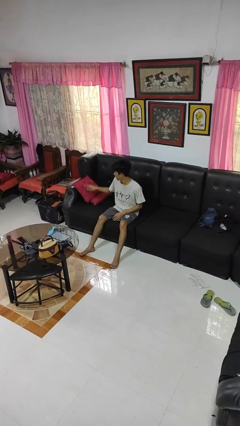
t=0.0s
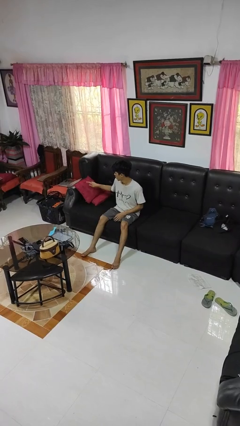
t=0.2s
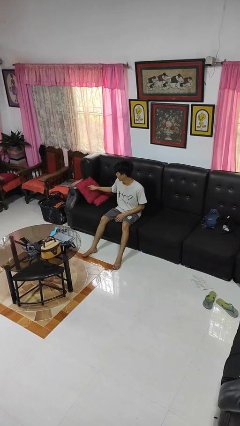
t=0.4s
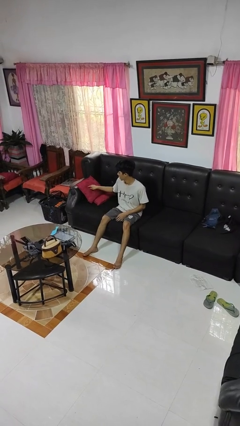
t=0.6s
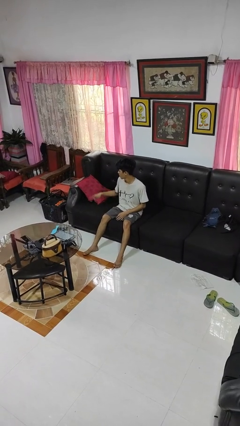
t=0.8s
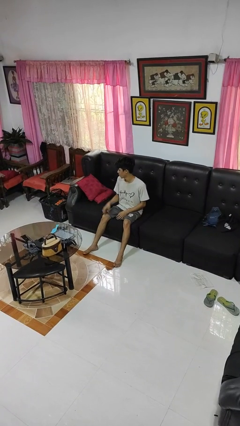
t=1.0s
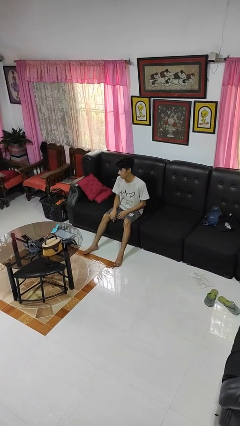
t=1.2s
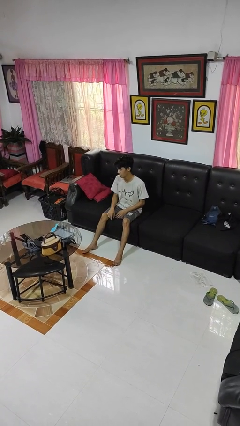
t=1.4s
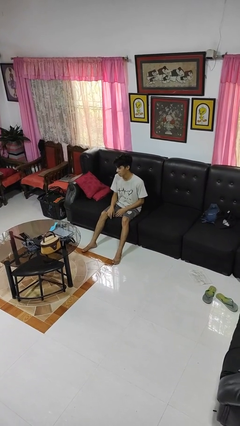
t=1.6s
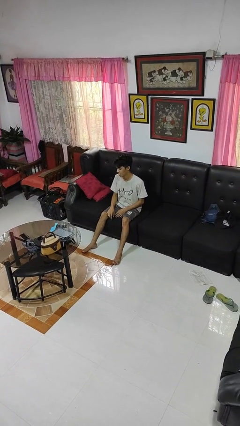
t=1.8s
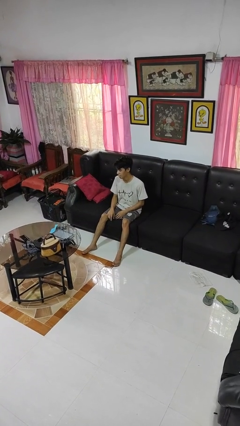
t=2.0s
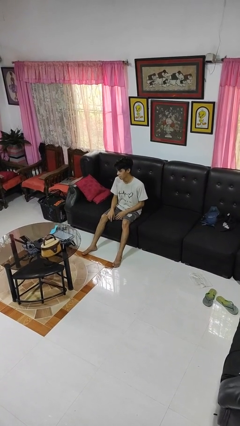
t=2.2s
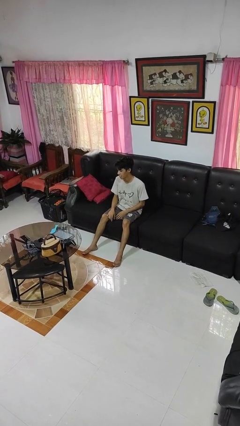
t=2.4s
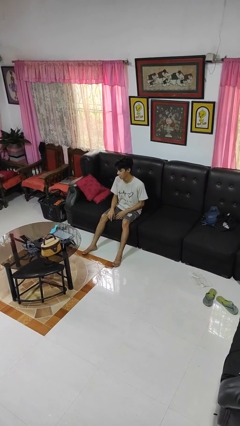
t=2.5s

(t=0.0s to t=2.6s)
person taps object with finger

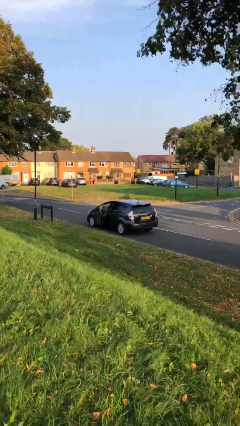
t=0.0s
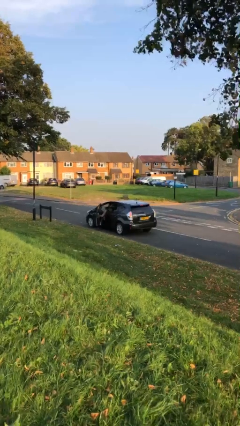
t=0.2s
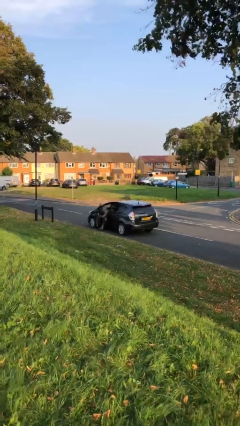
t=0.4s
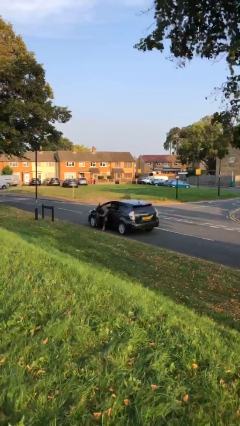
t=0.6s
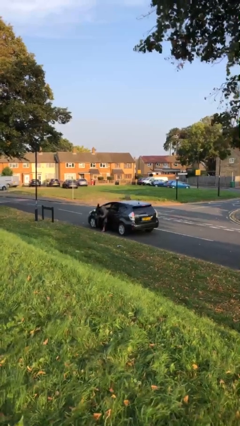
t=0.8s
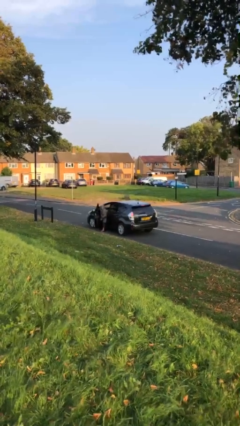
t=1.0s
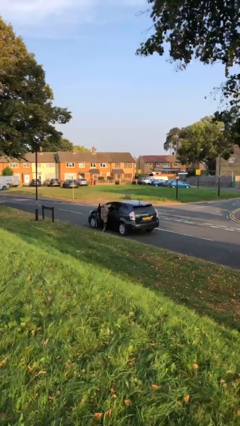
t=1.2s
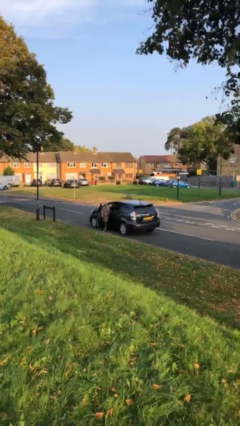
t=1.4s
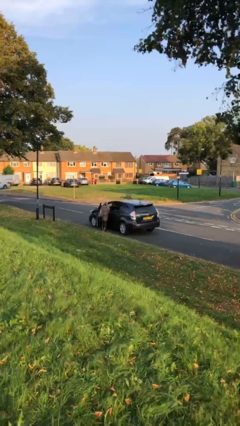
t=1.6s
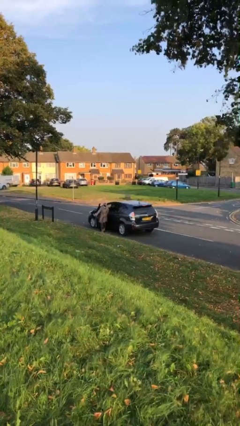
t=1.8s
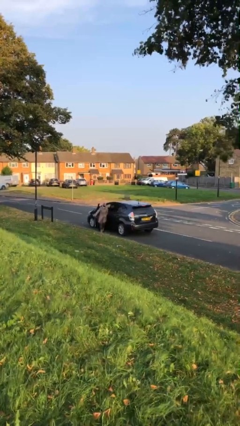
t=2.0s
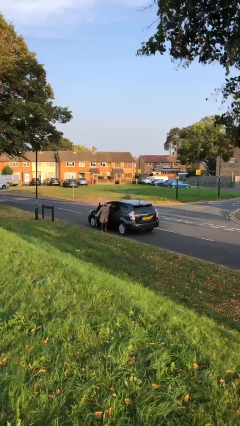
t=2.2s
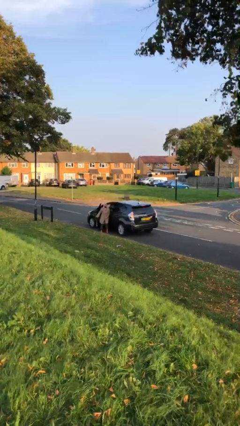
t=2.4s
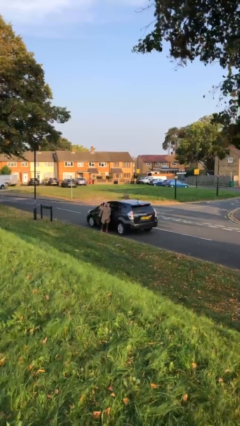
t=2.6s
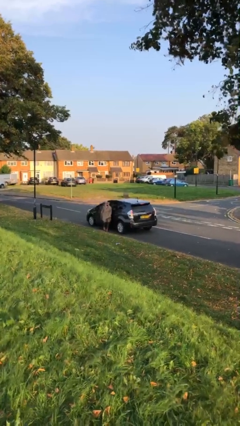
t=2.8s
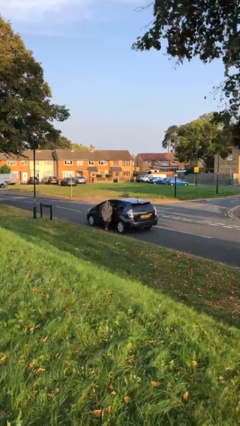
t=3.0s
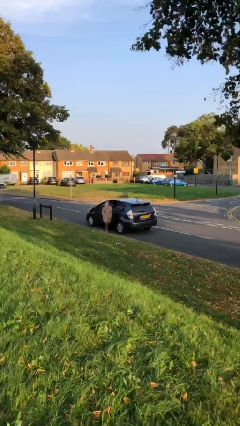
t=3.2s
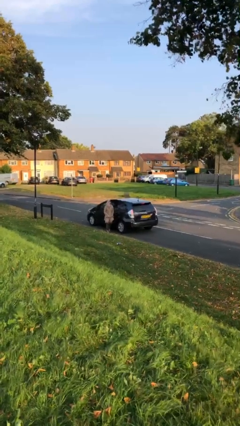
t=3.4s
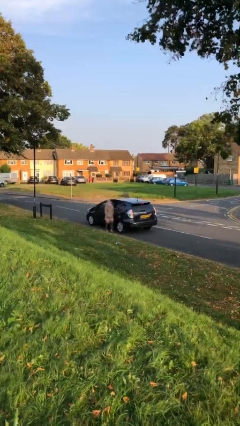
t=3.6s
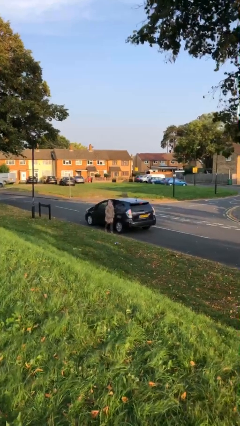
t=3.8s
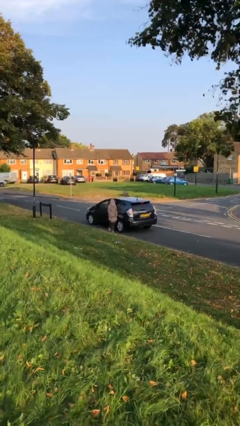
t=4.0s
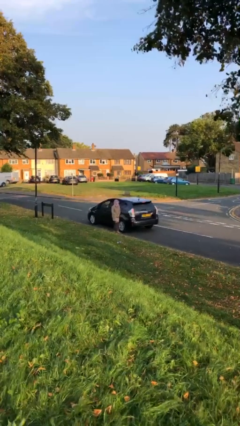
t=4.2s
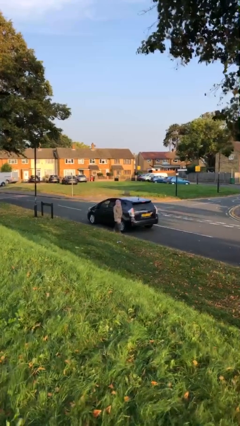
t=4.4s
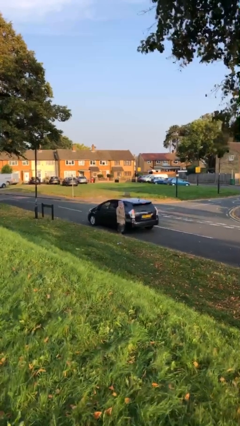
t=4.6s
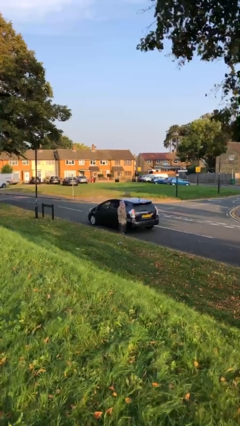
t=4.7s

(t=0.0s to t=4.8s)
car drops off person

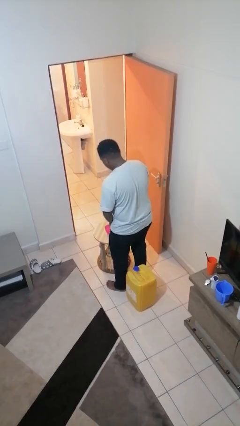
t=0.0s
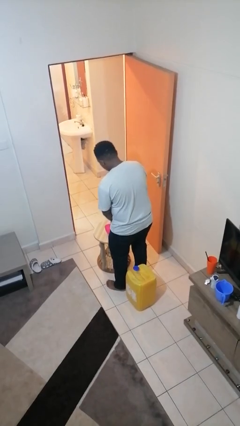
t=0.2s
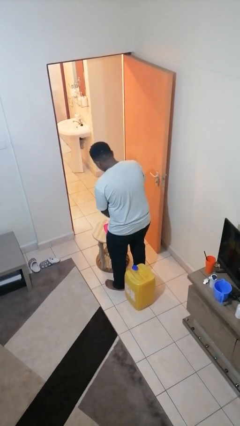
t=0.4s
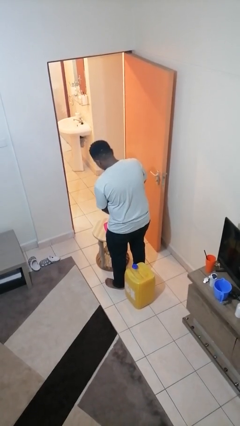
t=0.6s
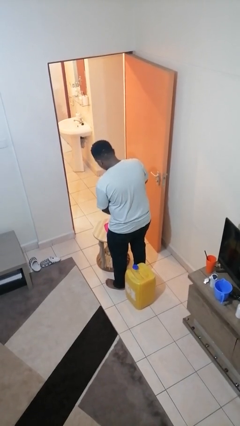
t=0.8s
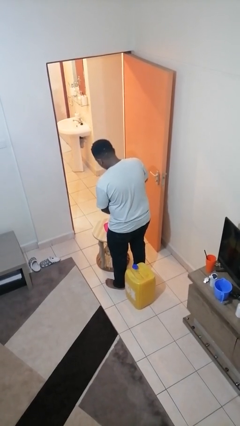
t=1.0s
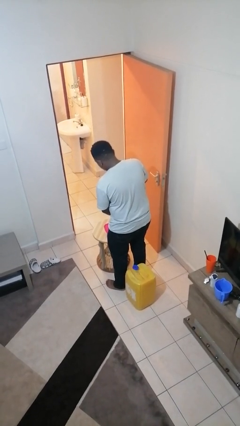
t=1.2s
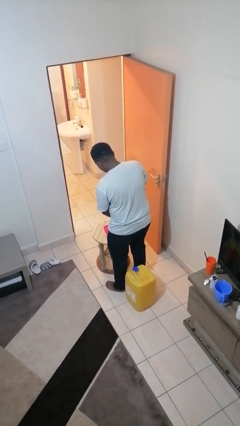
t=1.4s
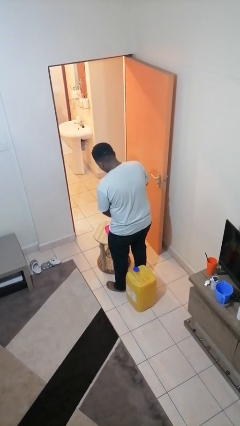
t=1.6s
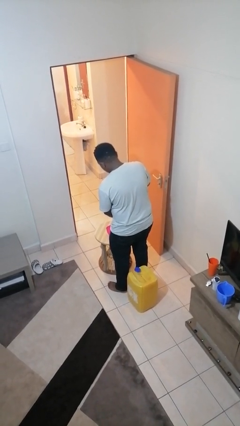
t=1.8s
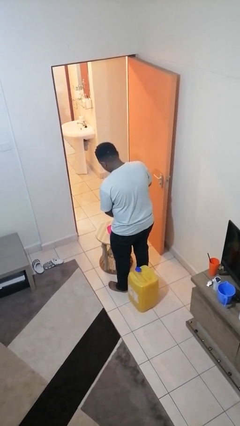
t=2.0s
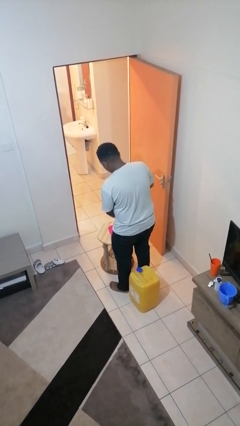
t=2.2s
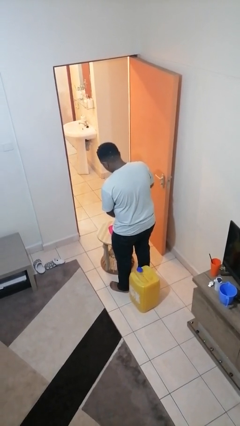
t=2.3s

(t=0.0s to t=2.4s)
person unscrews lid from bottle

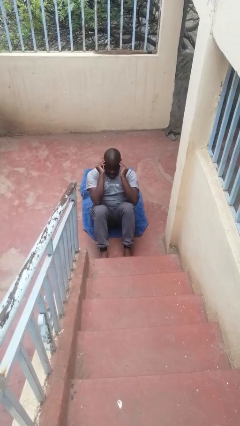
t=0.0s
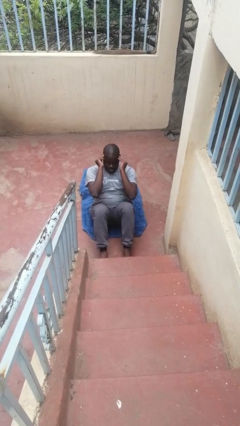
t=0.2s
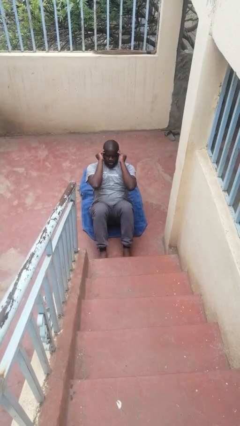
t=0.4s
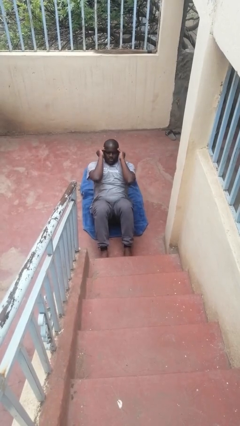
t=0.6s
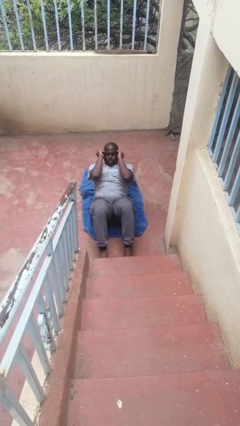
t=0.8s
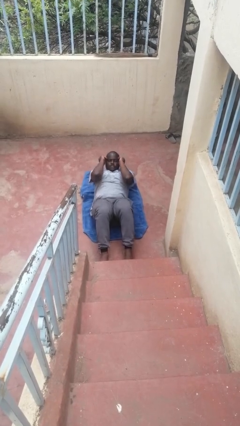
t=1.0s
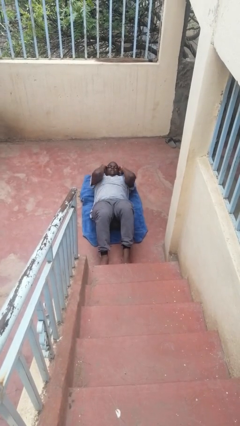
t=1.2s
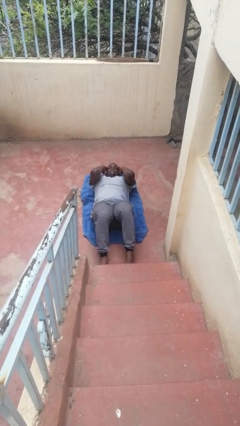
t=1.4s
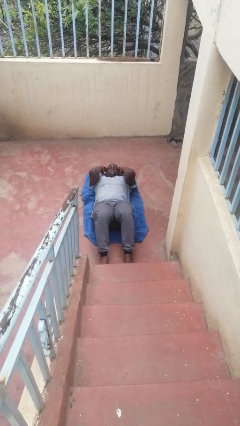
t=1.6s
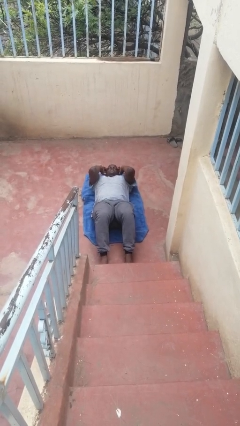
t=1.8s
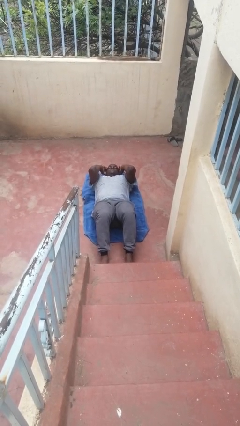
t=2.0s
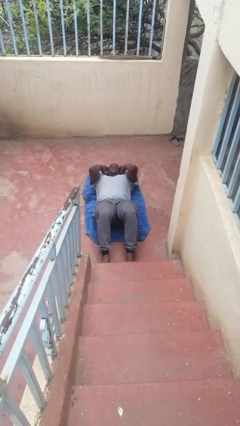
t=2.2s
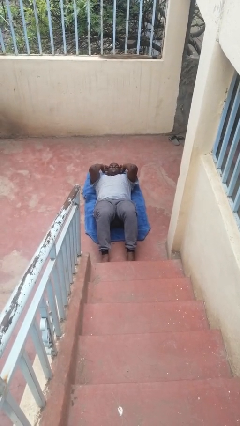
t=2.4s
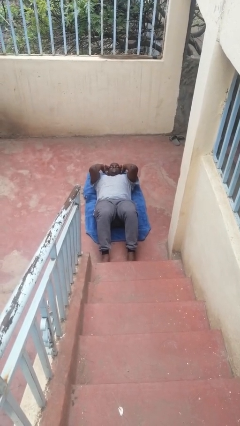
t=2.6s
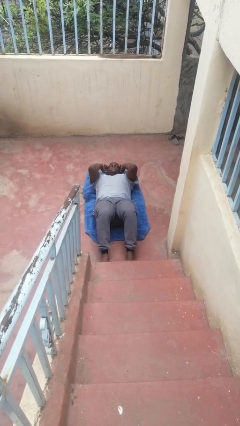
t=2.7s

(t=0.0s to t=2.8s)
person exercises with situp

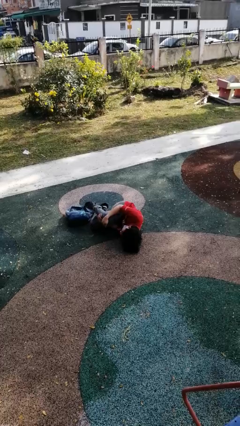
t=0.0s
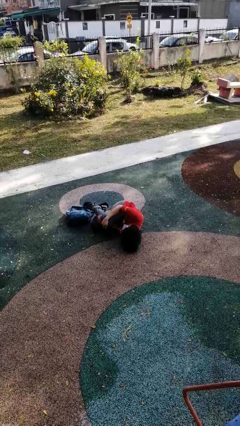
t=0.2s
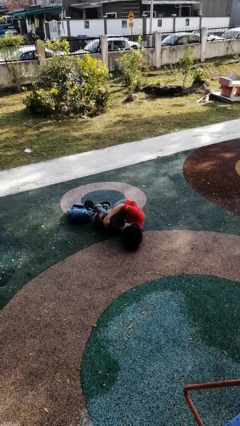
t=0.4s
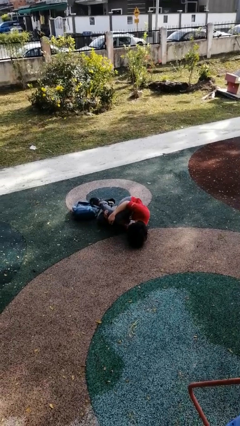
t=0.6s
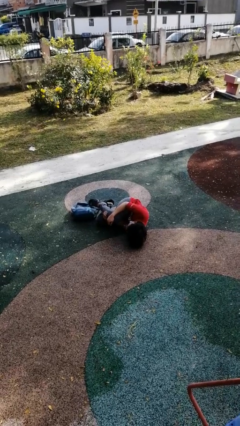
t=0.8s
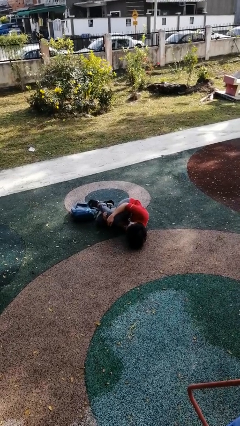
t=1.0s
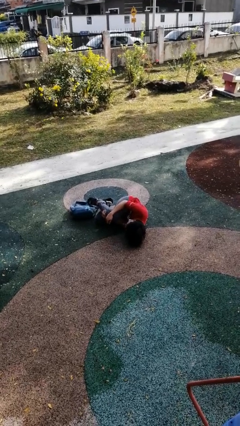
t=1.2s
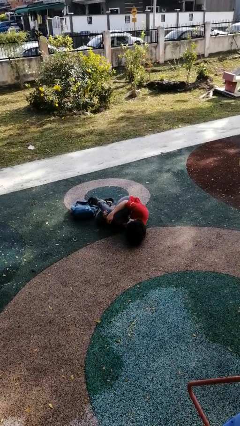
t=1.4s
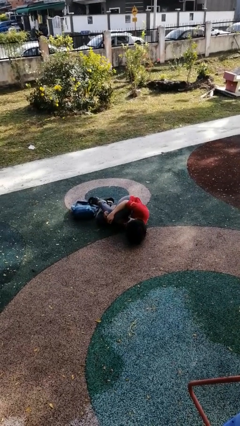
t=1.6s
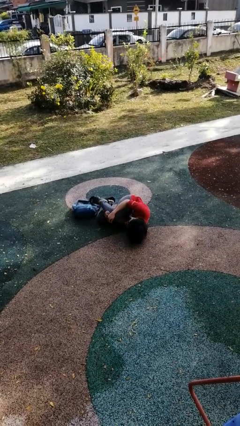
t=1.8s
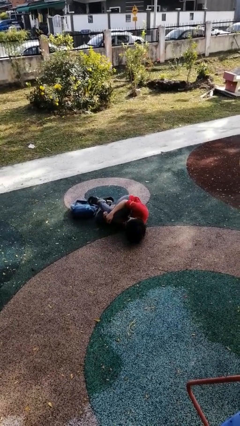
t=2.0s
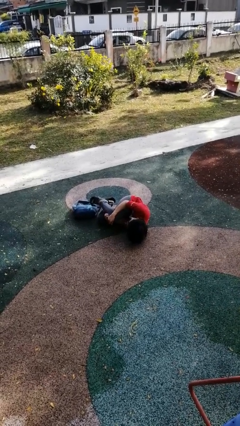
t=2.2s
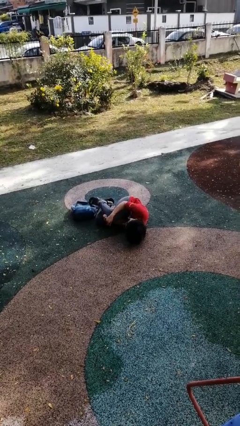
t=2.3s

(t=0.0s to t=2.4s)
person lies down on floor

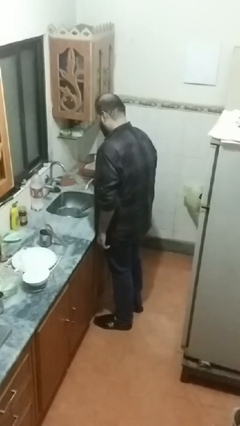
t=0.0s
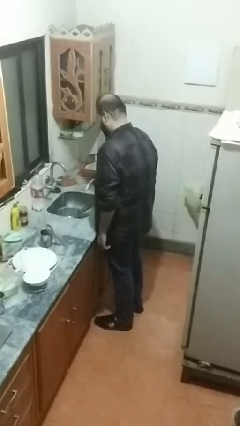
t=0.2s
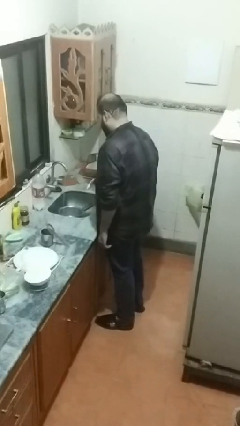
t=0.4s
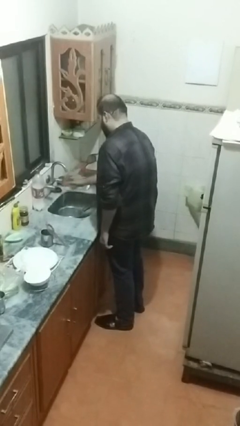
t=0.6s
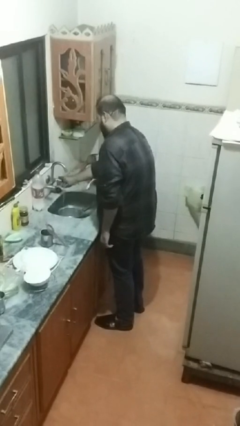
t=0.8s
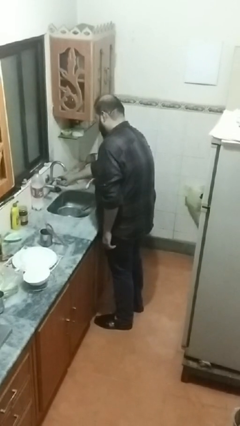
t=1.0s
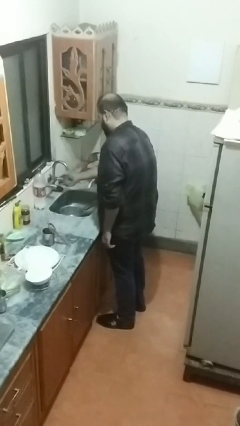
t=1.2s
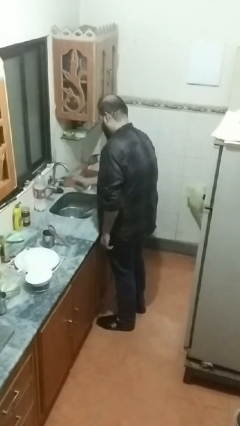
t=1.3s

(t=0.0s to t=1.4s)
person turns off faucet

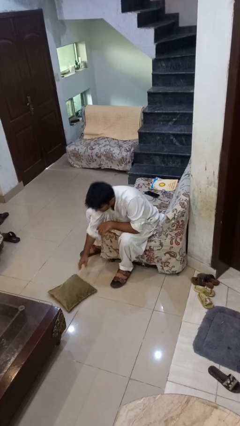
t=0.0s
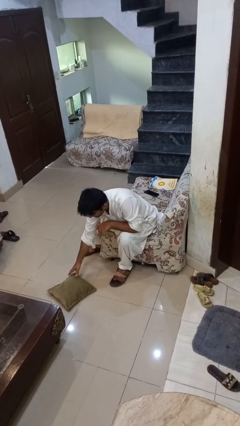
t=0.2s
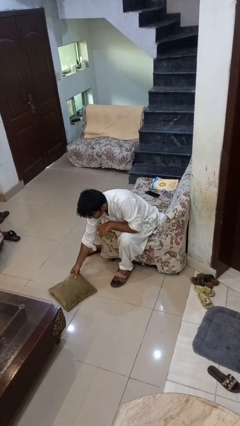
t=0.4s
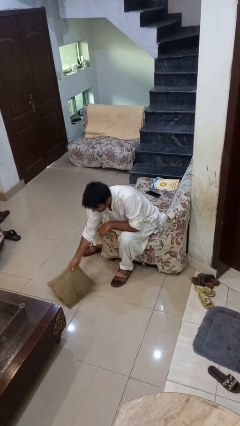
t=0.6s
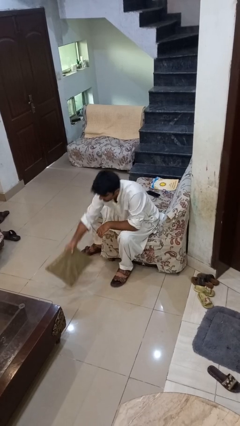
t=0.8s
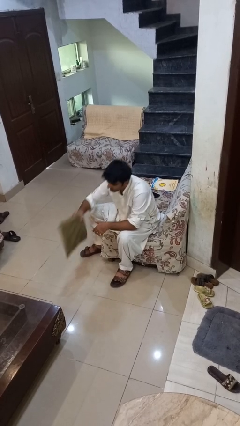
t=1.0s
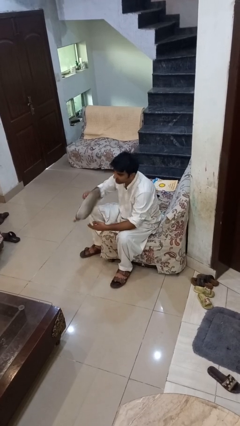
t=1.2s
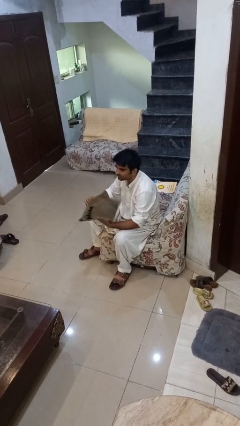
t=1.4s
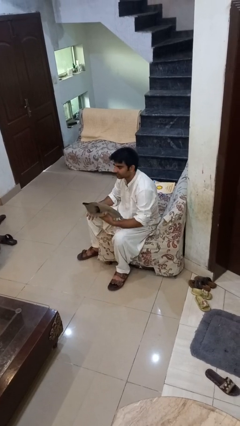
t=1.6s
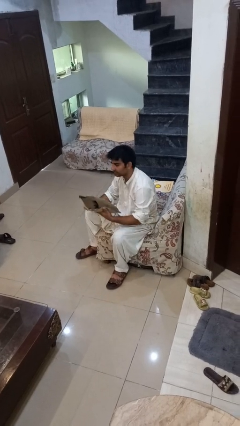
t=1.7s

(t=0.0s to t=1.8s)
person picks up object from floor
